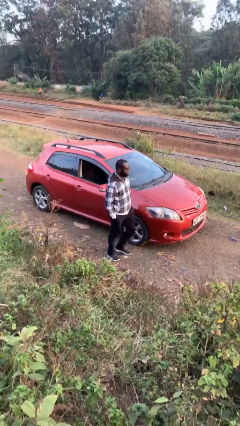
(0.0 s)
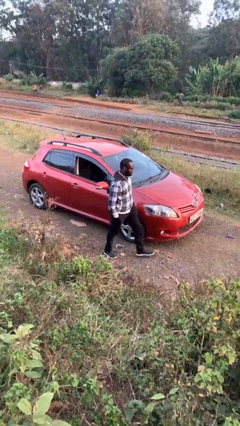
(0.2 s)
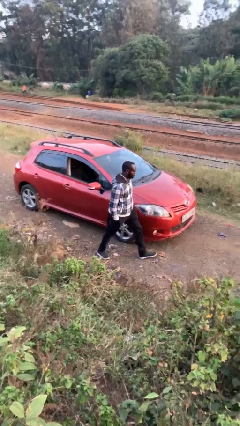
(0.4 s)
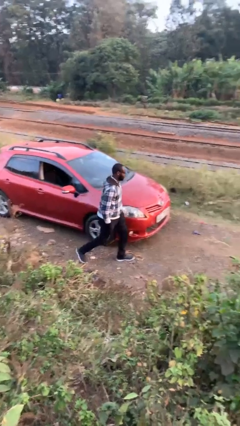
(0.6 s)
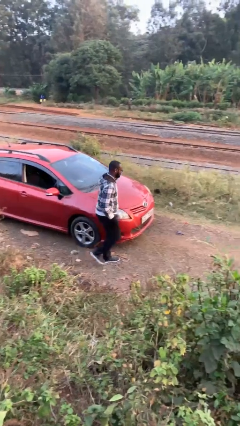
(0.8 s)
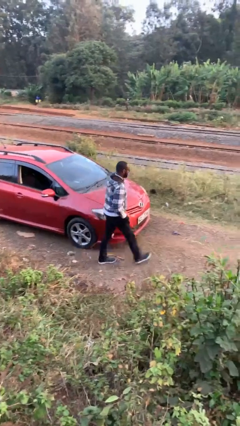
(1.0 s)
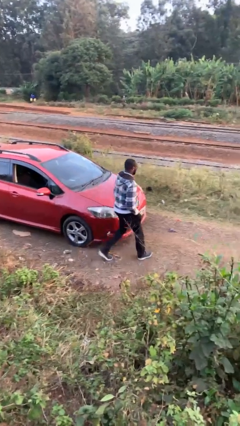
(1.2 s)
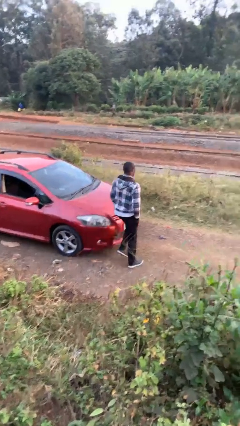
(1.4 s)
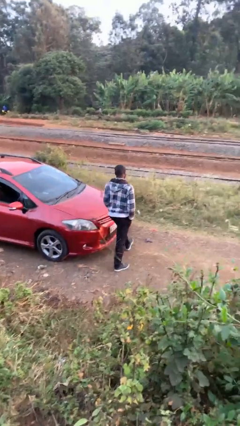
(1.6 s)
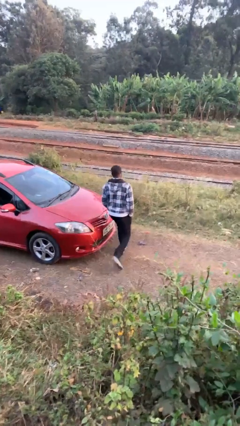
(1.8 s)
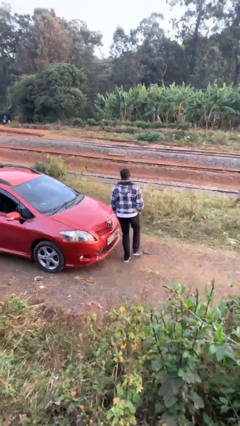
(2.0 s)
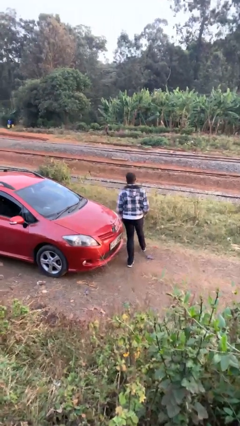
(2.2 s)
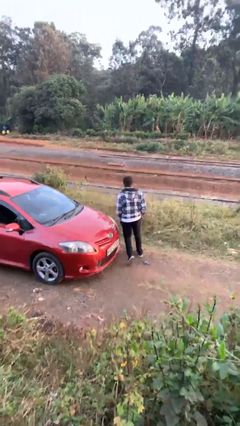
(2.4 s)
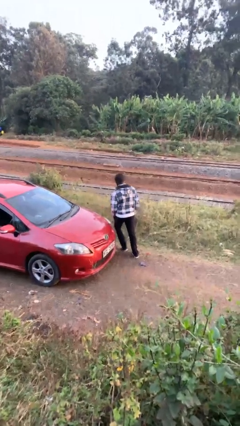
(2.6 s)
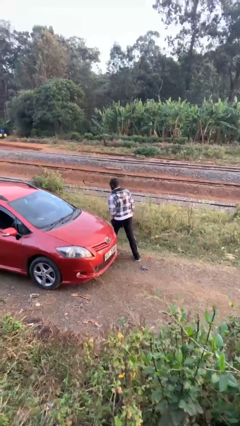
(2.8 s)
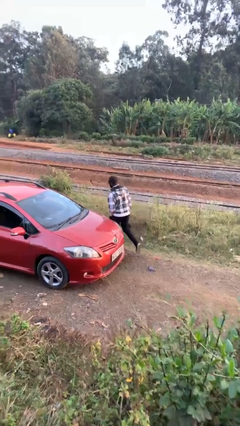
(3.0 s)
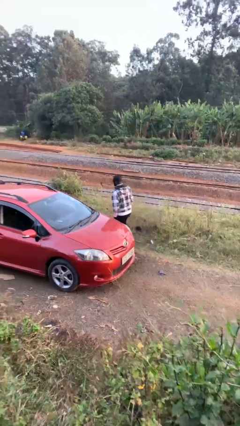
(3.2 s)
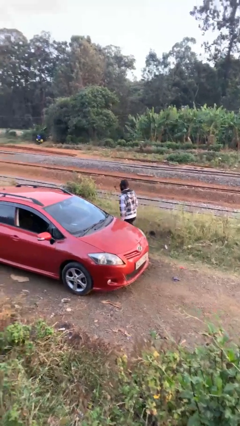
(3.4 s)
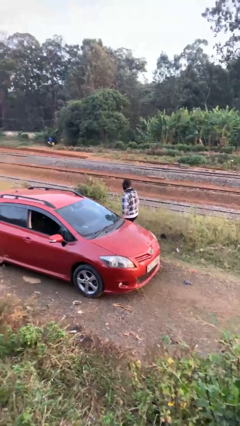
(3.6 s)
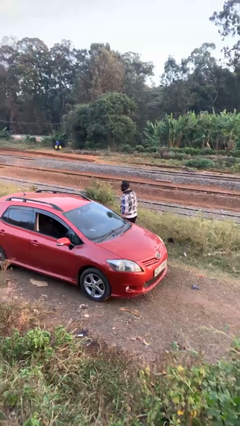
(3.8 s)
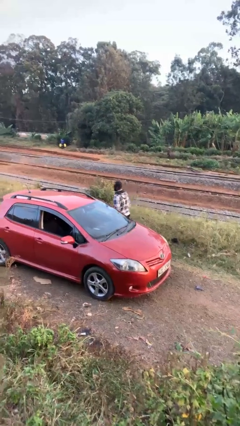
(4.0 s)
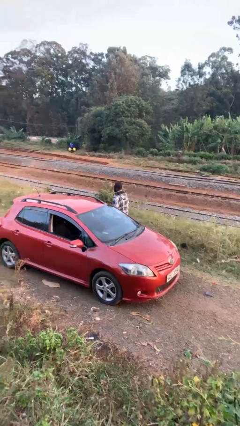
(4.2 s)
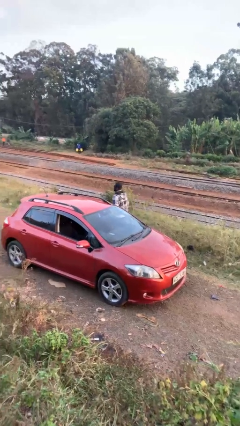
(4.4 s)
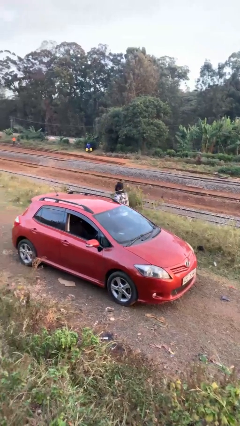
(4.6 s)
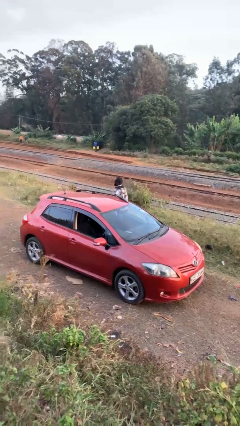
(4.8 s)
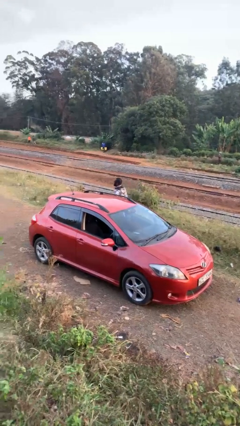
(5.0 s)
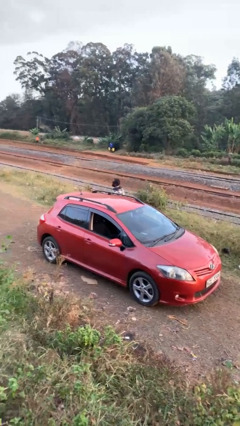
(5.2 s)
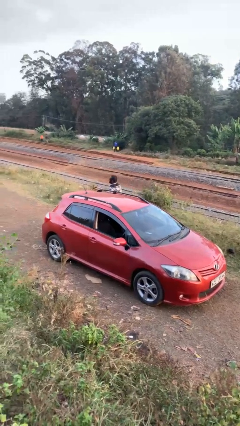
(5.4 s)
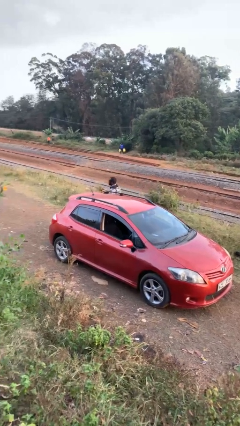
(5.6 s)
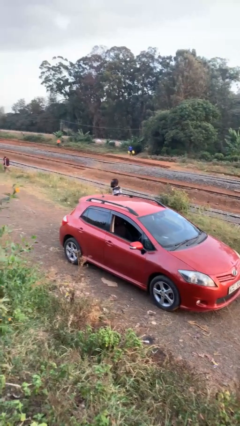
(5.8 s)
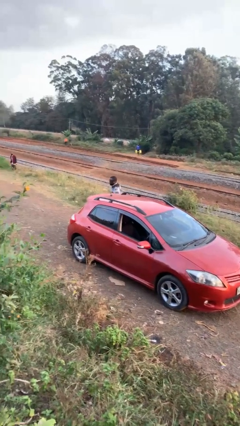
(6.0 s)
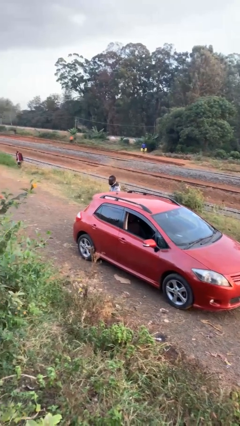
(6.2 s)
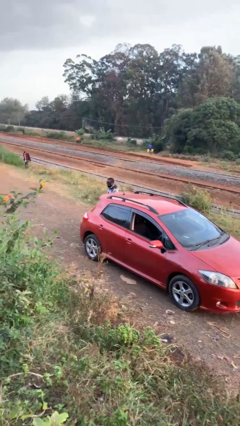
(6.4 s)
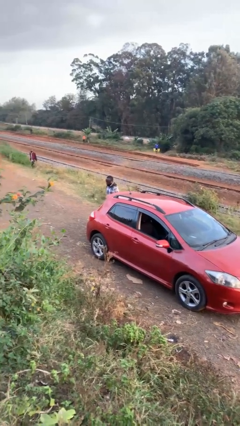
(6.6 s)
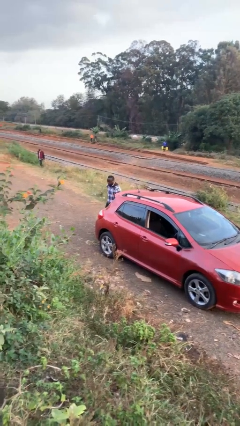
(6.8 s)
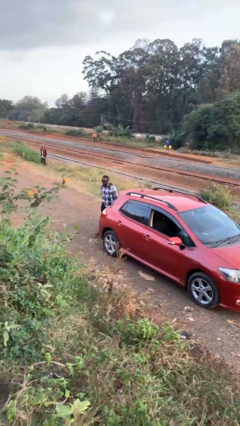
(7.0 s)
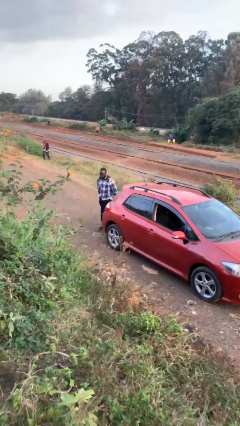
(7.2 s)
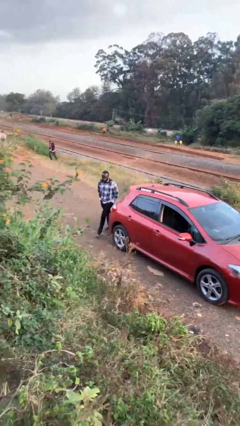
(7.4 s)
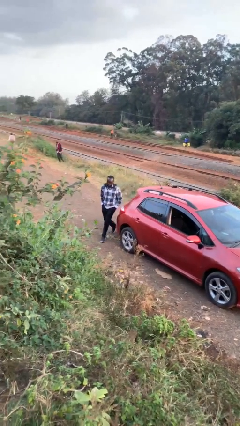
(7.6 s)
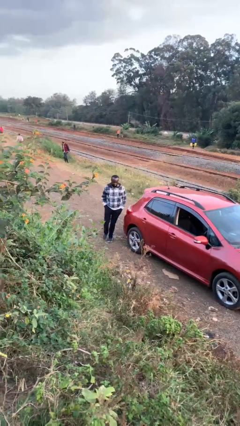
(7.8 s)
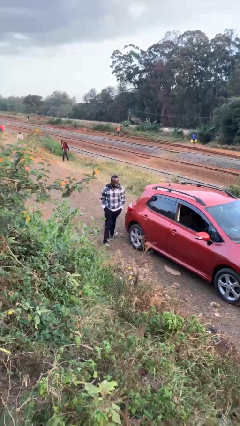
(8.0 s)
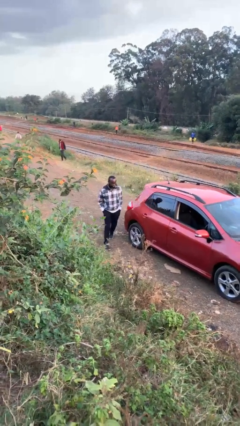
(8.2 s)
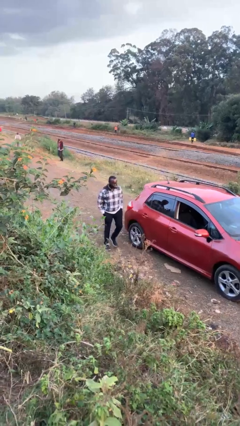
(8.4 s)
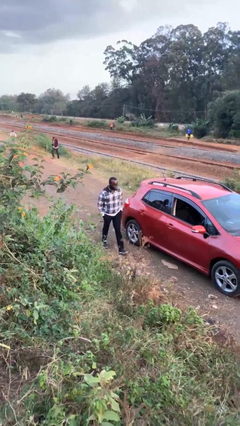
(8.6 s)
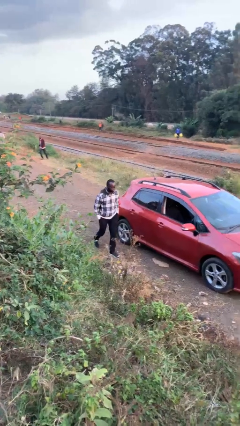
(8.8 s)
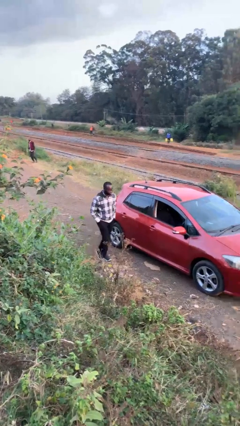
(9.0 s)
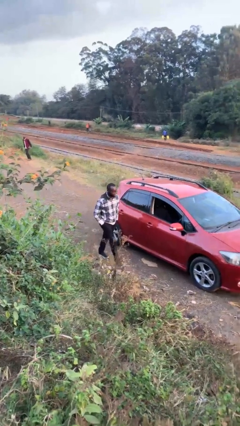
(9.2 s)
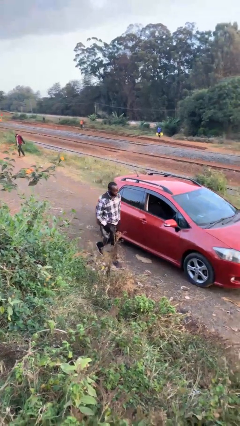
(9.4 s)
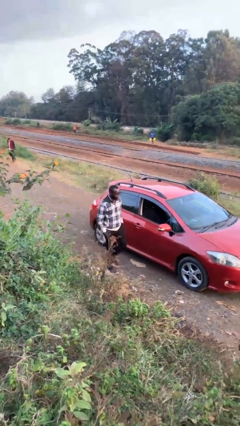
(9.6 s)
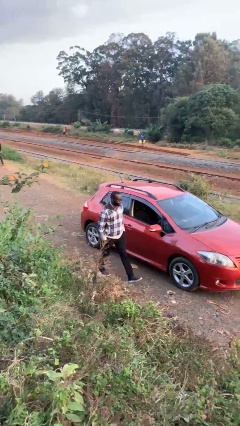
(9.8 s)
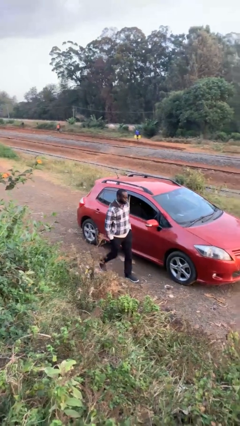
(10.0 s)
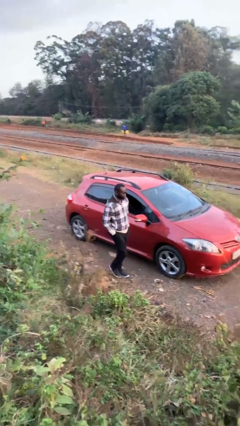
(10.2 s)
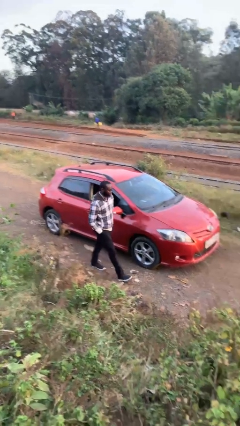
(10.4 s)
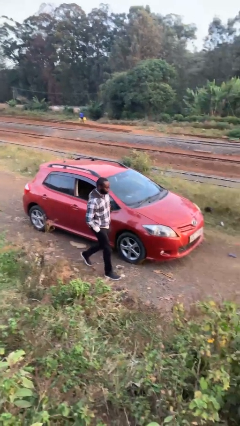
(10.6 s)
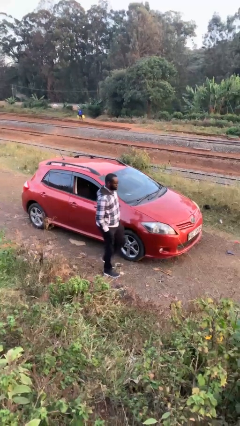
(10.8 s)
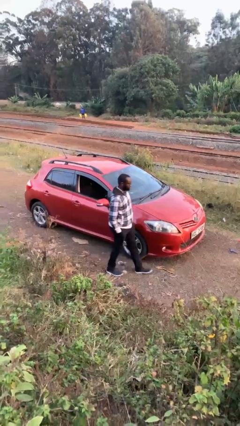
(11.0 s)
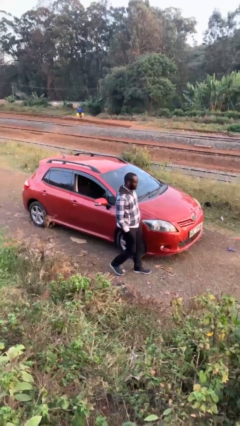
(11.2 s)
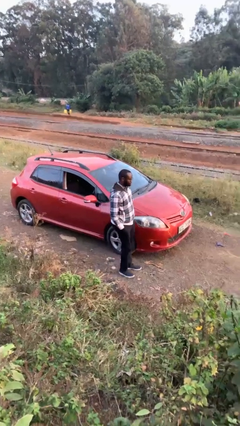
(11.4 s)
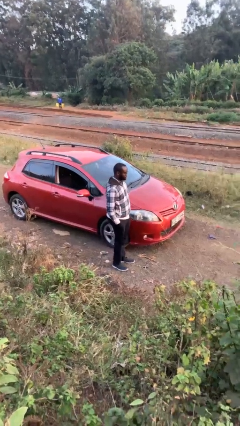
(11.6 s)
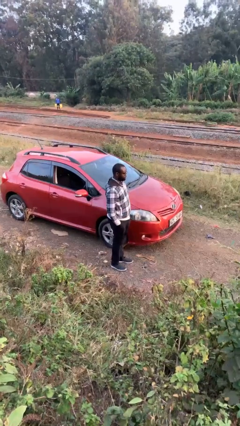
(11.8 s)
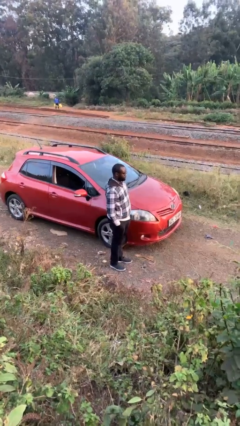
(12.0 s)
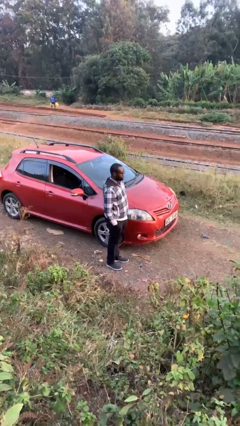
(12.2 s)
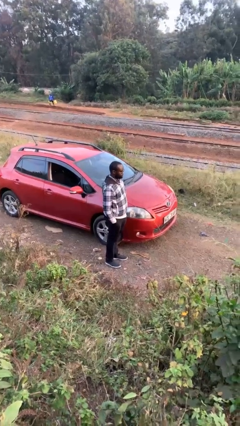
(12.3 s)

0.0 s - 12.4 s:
person walks around car

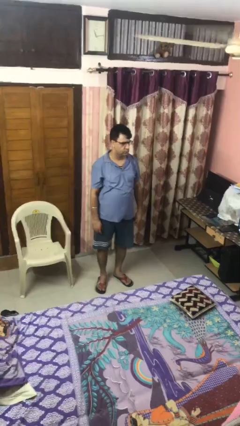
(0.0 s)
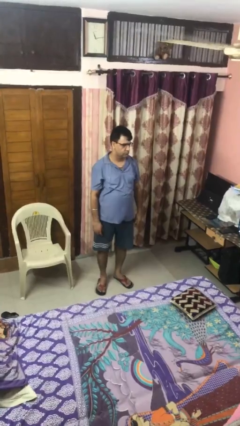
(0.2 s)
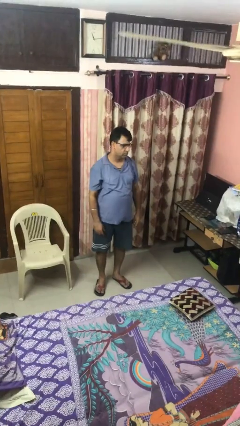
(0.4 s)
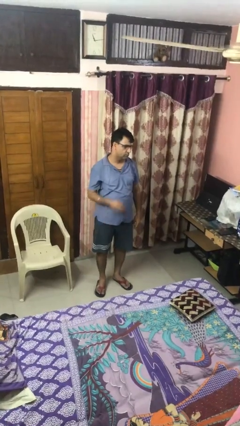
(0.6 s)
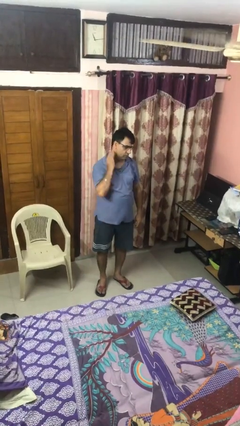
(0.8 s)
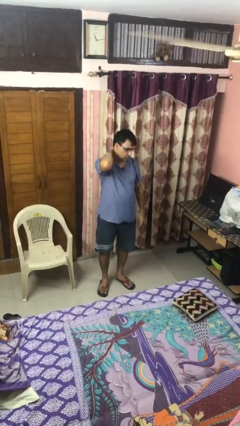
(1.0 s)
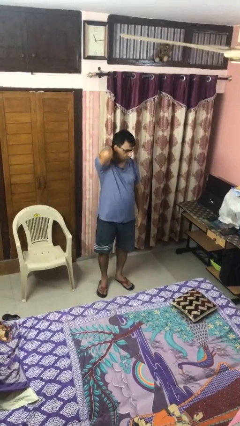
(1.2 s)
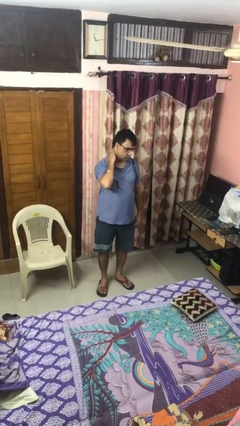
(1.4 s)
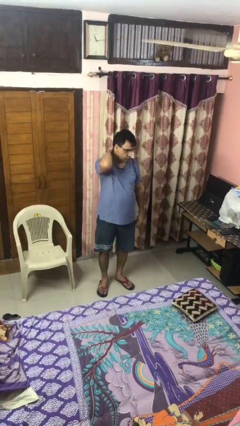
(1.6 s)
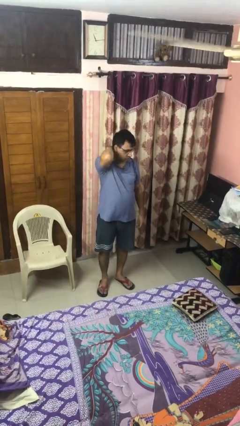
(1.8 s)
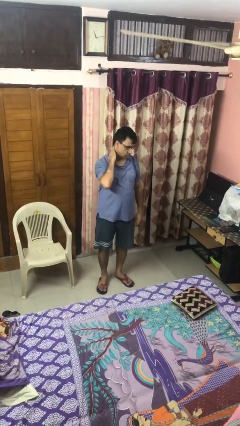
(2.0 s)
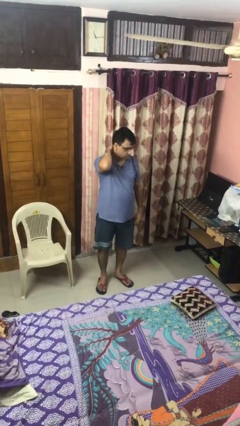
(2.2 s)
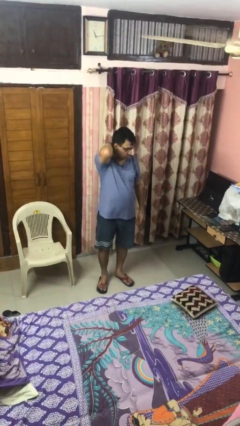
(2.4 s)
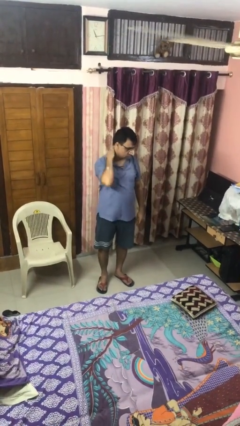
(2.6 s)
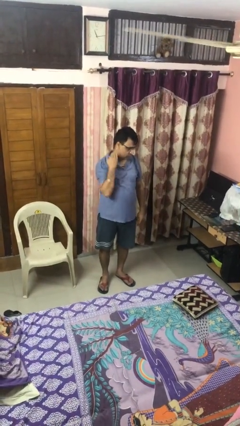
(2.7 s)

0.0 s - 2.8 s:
person rubs neck

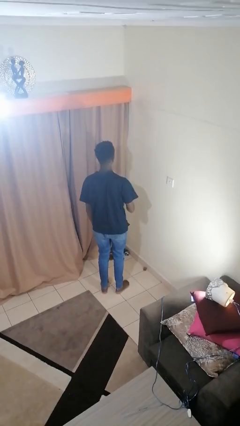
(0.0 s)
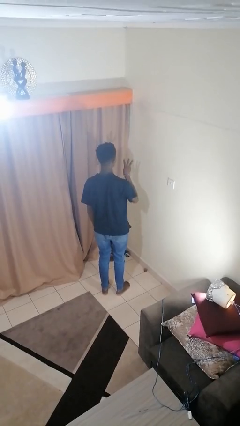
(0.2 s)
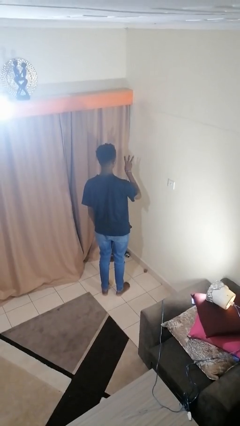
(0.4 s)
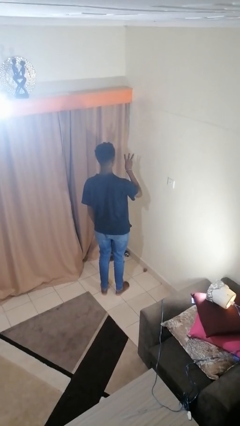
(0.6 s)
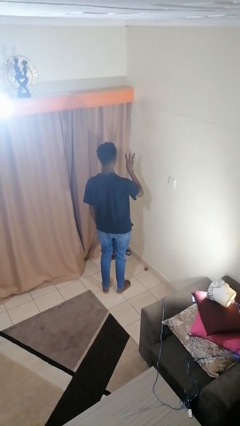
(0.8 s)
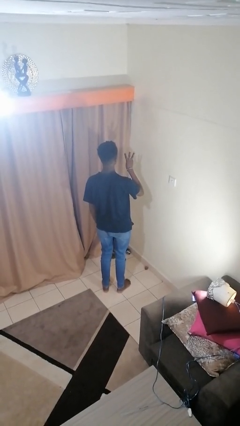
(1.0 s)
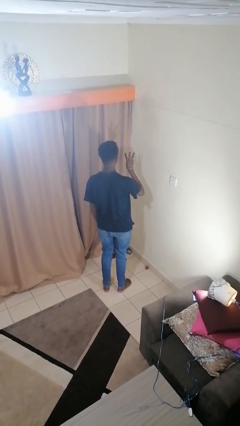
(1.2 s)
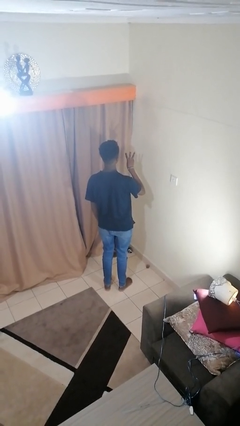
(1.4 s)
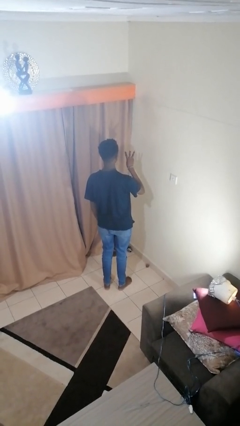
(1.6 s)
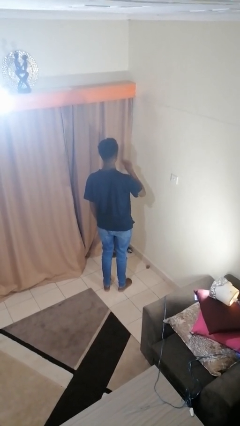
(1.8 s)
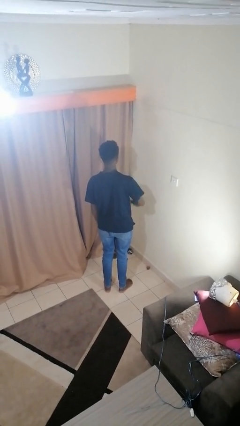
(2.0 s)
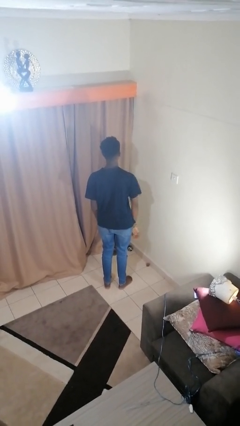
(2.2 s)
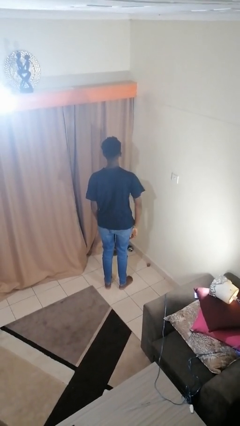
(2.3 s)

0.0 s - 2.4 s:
person gestures number three
